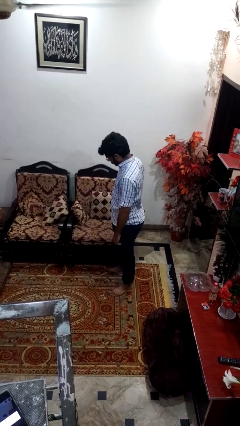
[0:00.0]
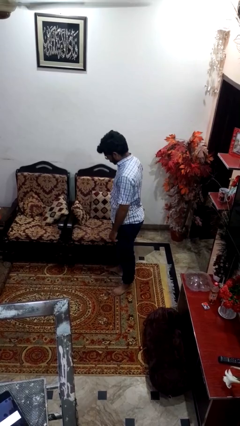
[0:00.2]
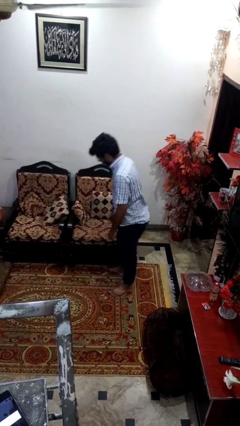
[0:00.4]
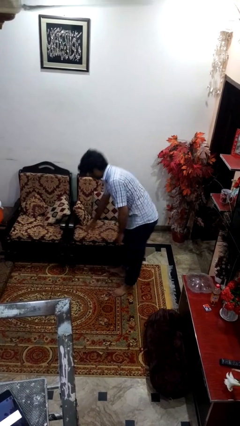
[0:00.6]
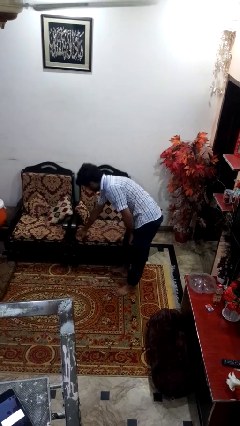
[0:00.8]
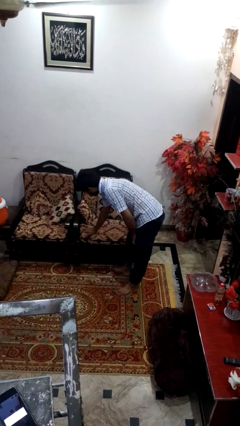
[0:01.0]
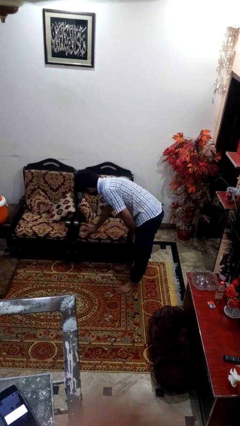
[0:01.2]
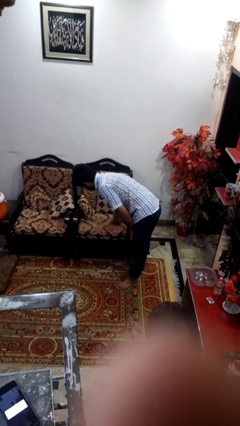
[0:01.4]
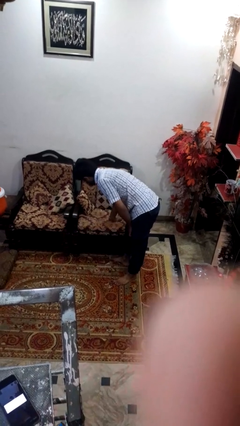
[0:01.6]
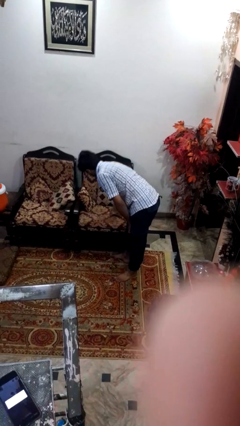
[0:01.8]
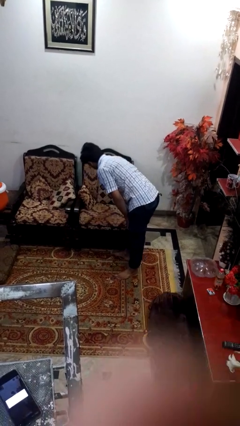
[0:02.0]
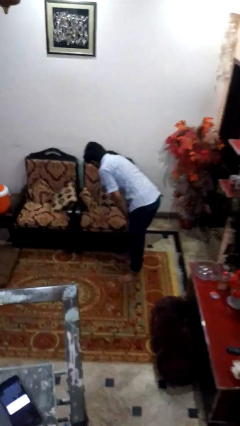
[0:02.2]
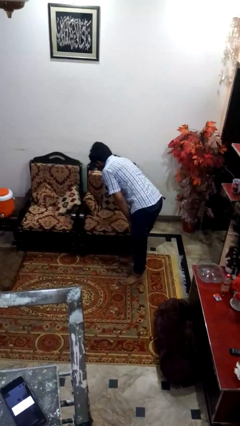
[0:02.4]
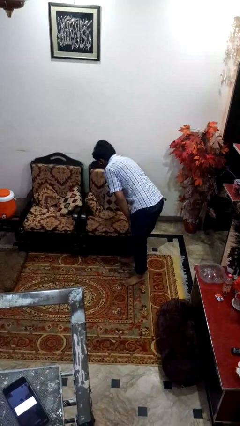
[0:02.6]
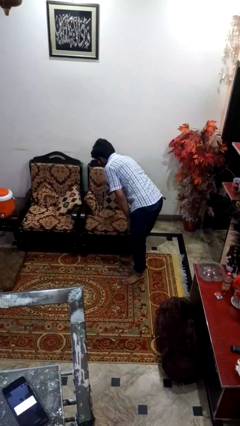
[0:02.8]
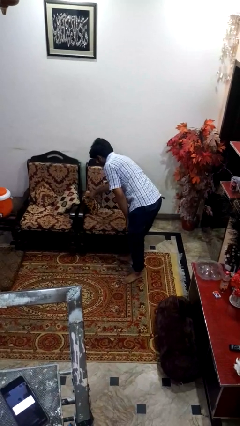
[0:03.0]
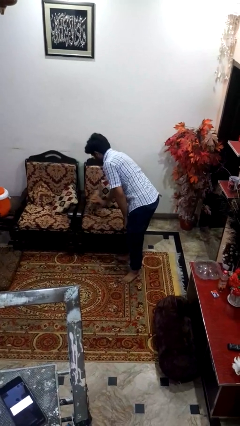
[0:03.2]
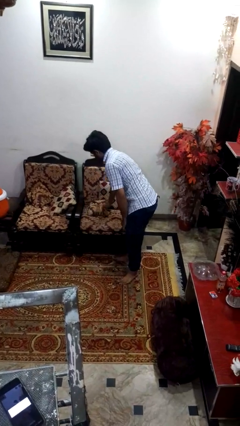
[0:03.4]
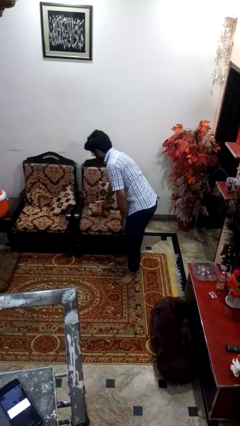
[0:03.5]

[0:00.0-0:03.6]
person searches in couch

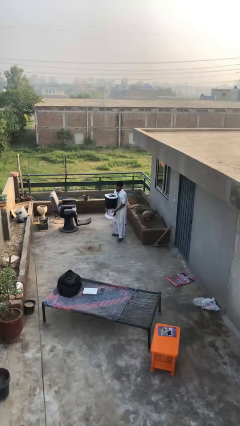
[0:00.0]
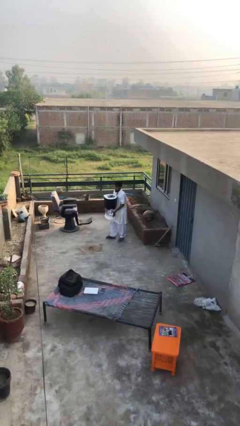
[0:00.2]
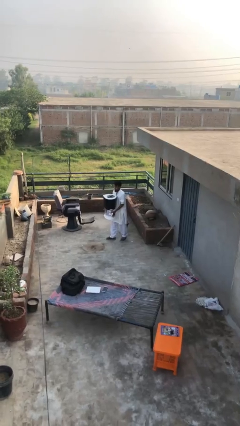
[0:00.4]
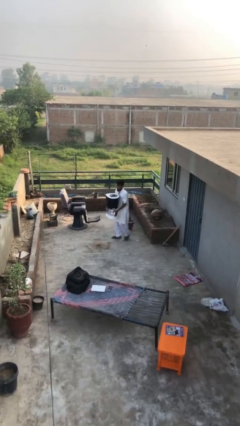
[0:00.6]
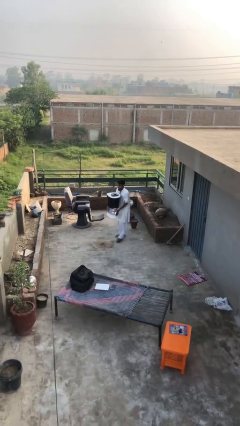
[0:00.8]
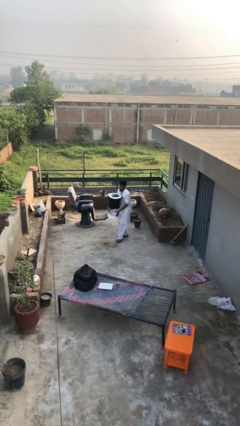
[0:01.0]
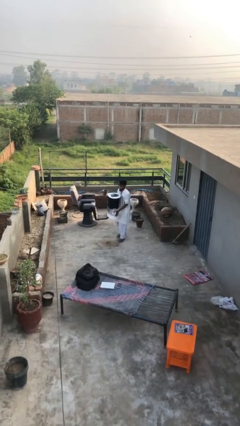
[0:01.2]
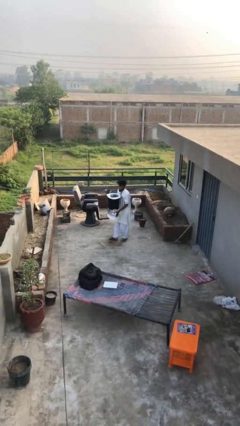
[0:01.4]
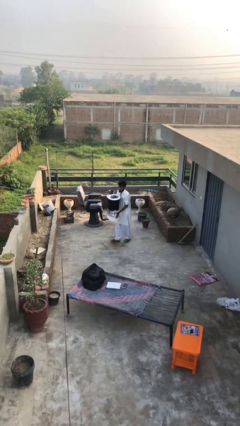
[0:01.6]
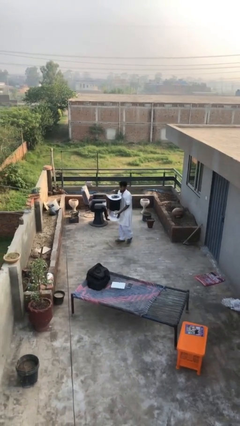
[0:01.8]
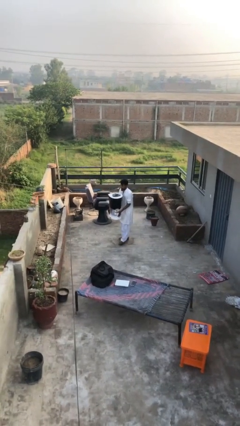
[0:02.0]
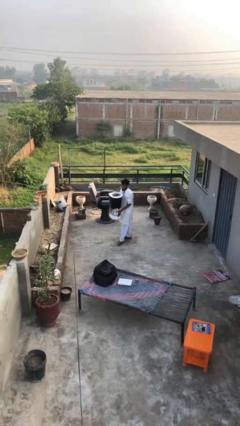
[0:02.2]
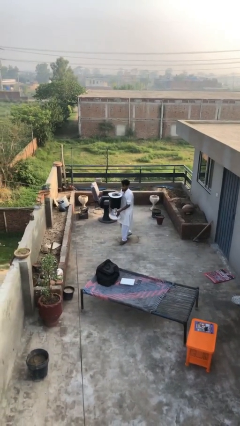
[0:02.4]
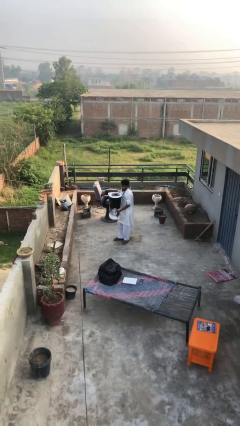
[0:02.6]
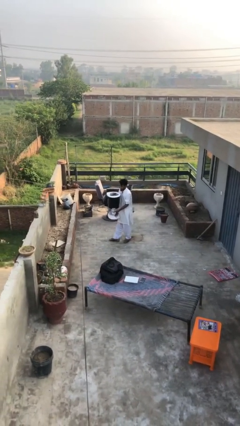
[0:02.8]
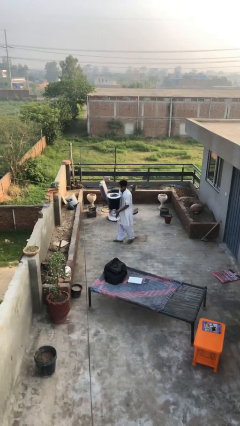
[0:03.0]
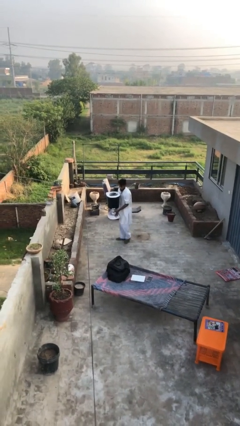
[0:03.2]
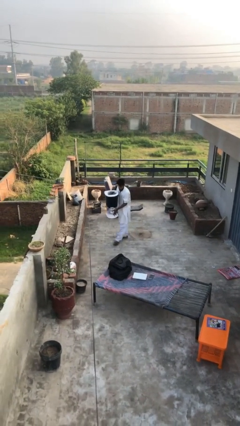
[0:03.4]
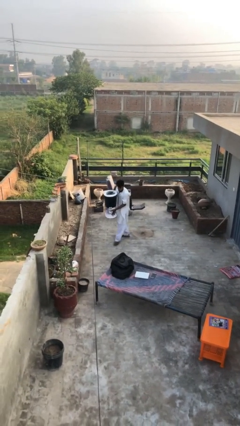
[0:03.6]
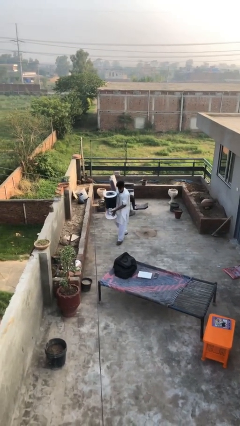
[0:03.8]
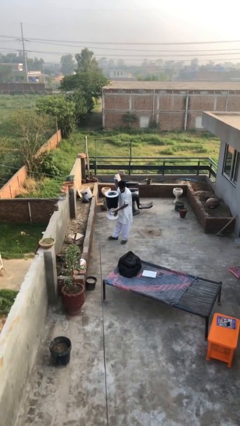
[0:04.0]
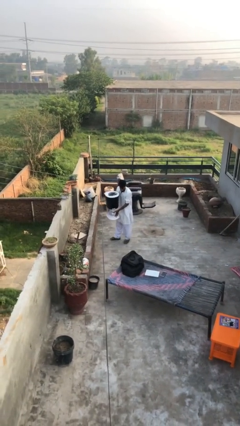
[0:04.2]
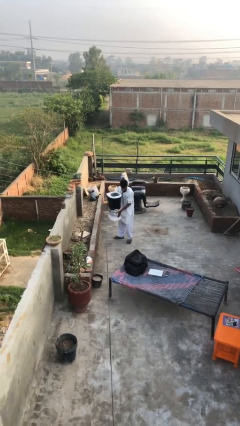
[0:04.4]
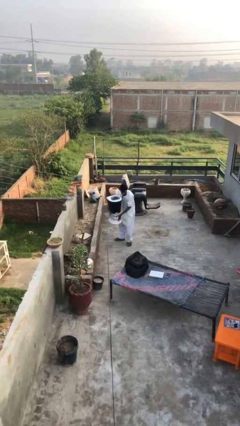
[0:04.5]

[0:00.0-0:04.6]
person carries heavy object

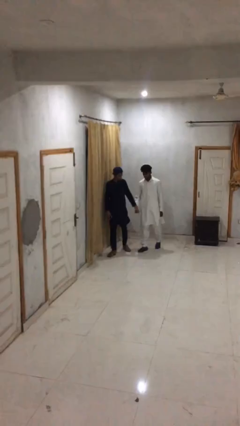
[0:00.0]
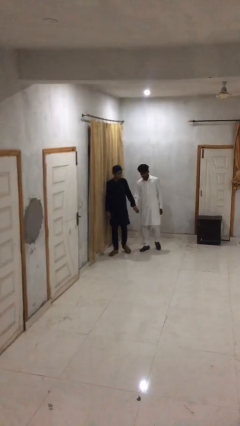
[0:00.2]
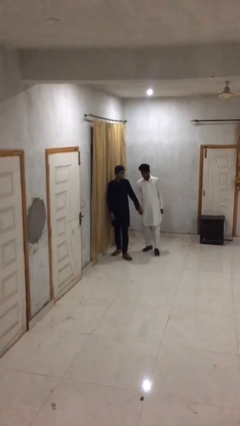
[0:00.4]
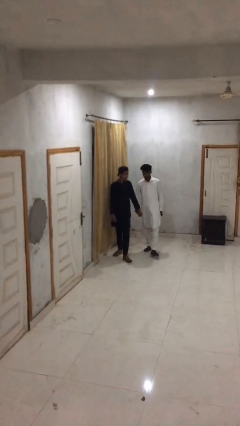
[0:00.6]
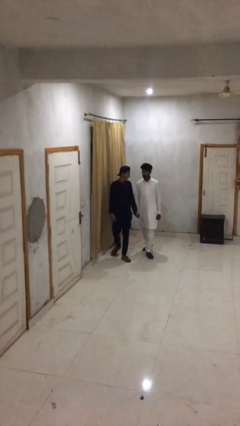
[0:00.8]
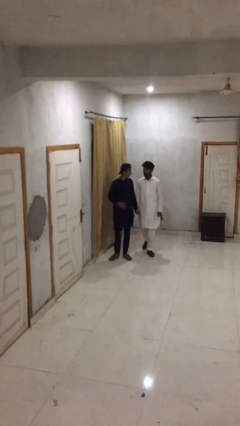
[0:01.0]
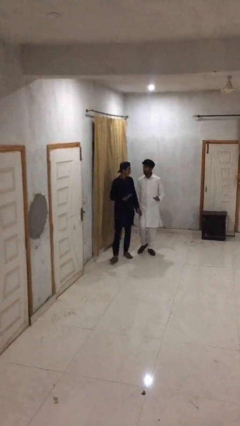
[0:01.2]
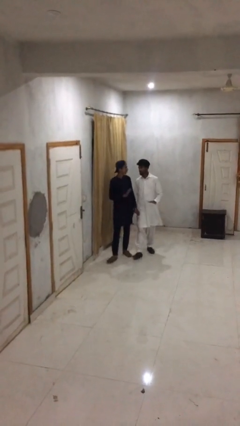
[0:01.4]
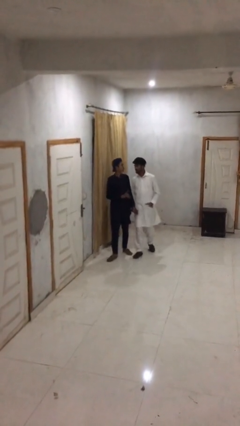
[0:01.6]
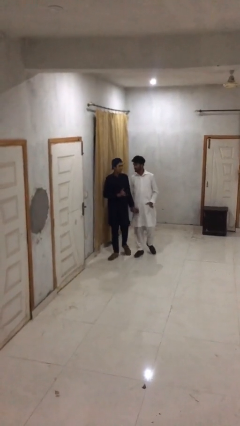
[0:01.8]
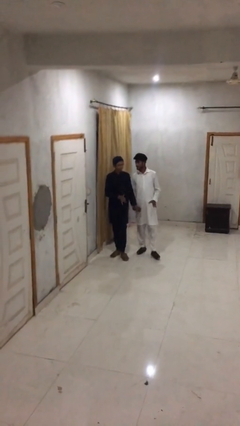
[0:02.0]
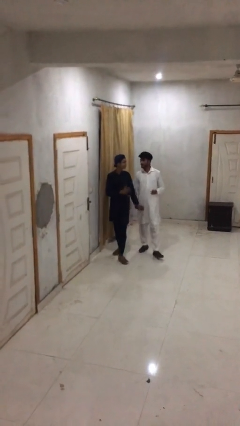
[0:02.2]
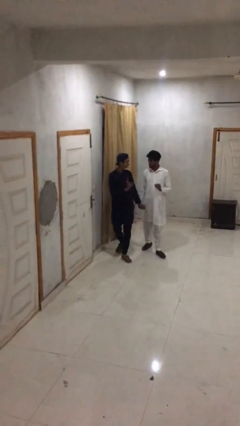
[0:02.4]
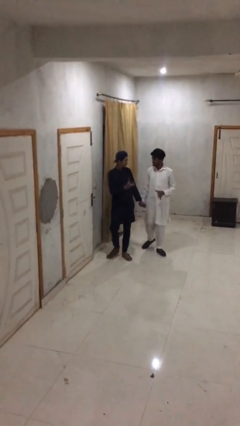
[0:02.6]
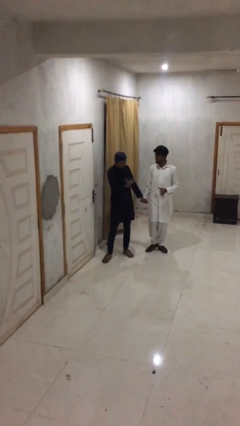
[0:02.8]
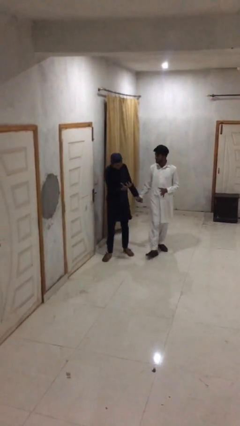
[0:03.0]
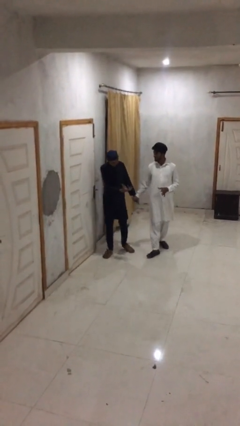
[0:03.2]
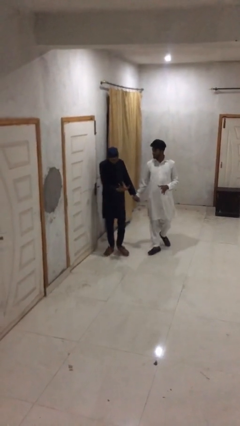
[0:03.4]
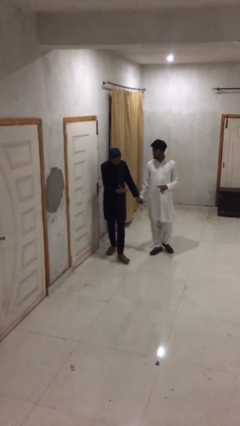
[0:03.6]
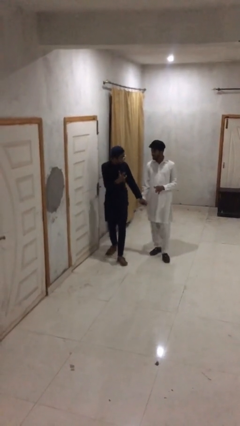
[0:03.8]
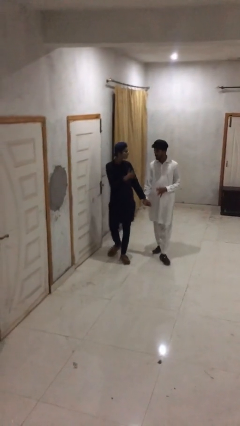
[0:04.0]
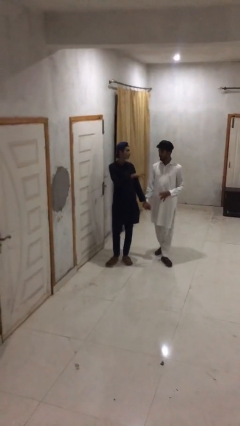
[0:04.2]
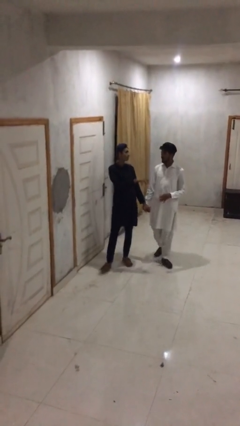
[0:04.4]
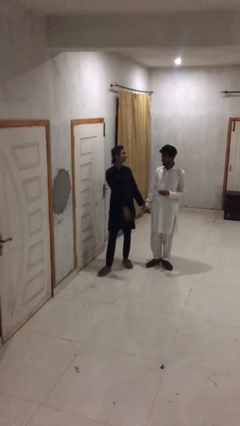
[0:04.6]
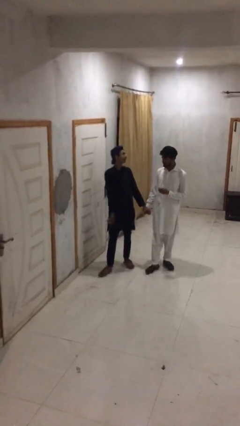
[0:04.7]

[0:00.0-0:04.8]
person holds hand

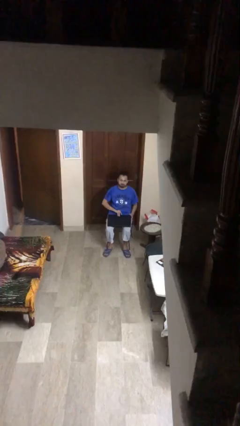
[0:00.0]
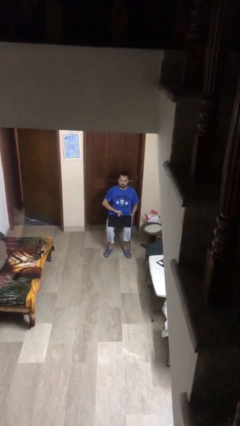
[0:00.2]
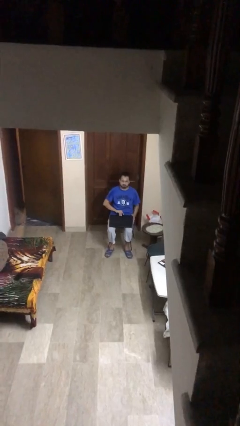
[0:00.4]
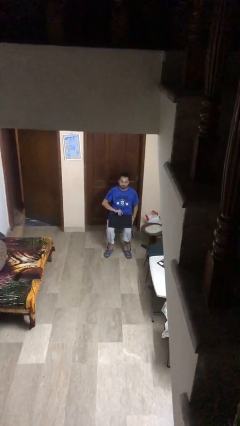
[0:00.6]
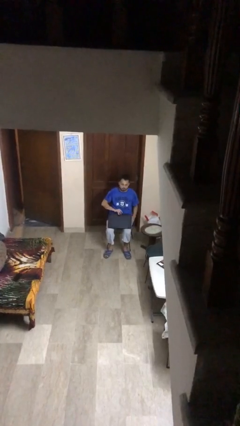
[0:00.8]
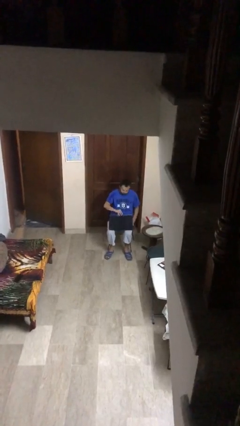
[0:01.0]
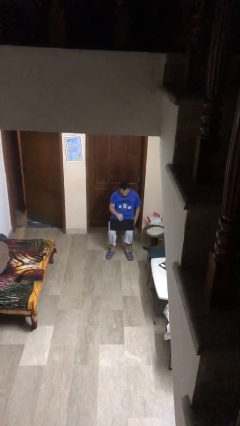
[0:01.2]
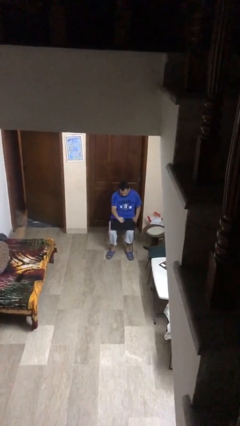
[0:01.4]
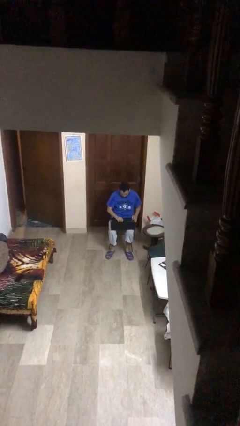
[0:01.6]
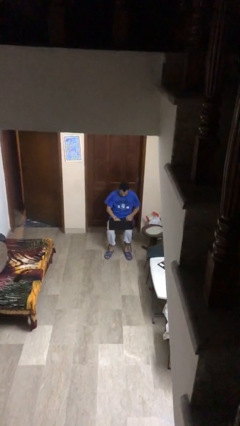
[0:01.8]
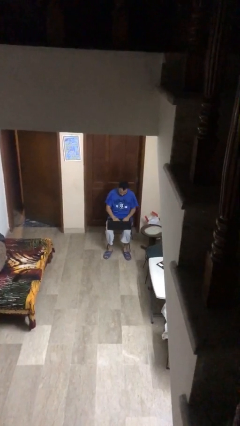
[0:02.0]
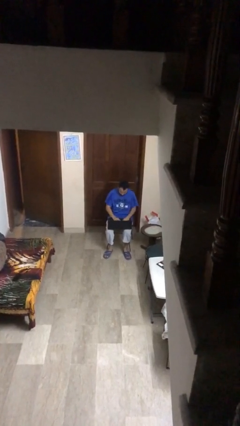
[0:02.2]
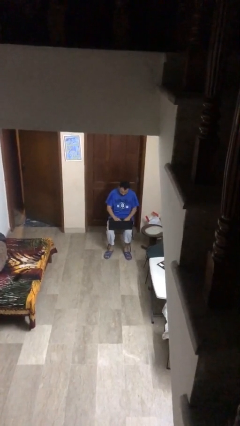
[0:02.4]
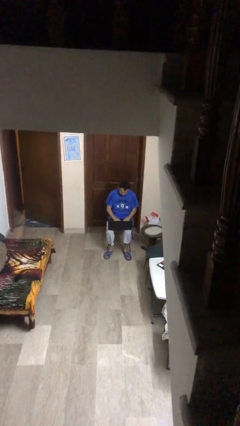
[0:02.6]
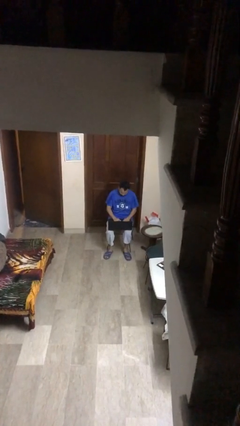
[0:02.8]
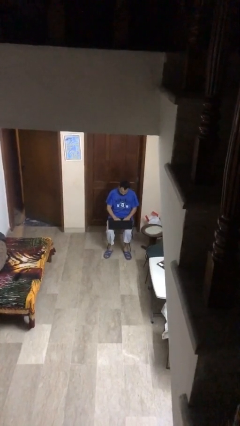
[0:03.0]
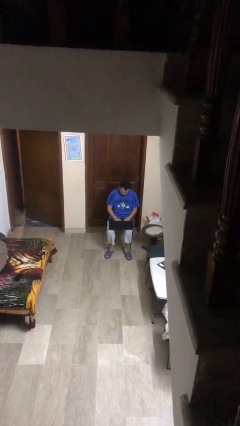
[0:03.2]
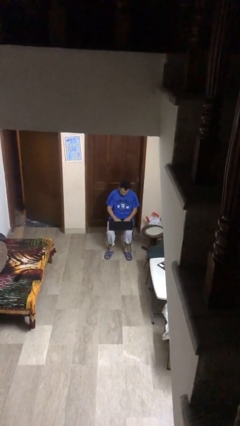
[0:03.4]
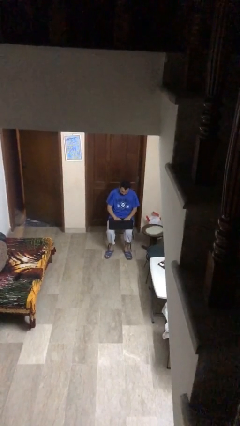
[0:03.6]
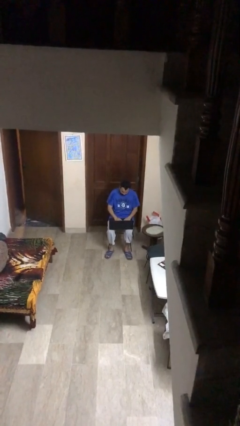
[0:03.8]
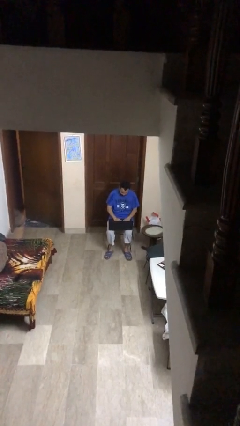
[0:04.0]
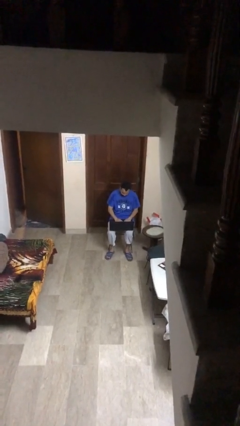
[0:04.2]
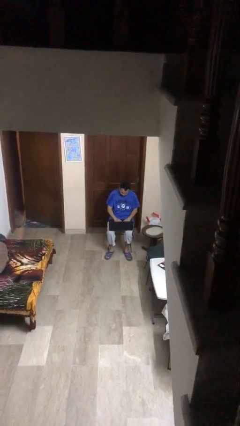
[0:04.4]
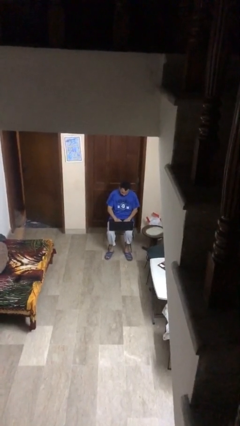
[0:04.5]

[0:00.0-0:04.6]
person interacts with laptop

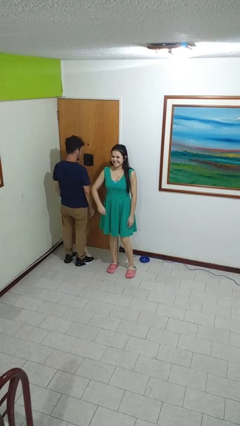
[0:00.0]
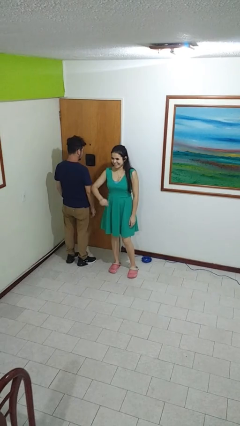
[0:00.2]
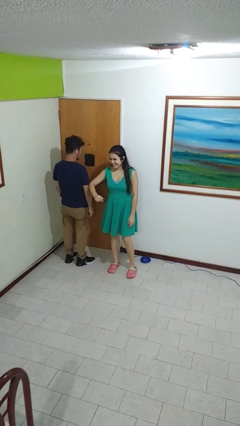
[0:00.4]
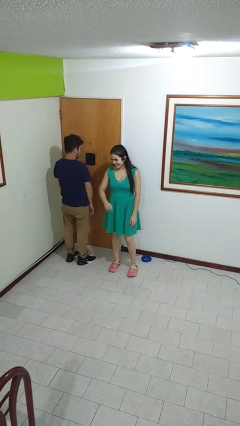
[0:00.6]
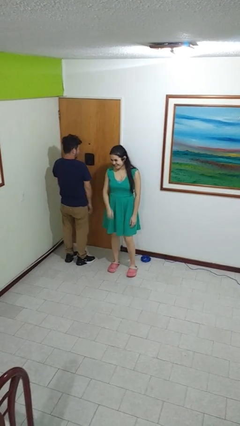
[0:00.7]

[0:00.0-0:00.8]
person nudges person with elbow
